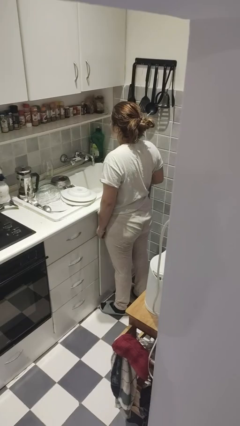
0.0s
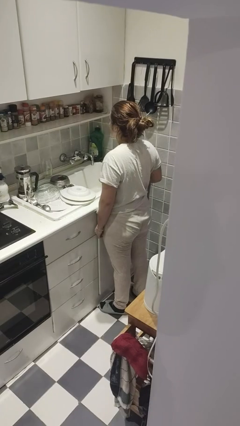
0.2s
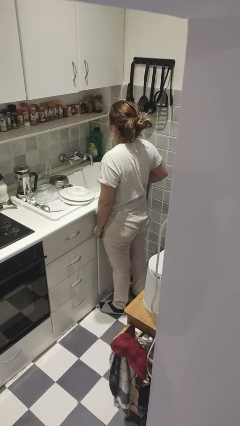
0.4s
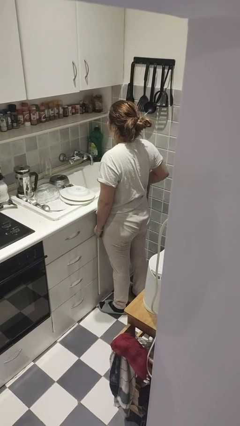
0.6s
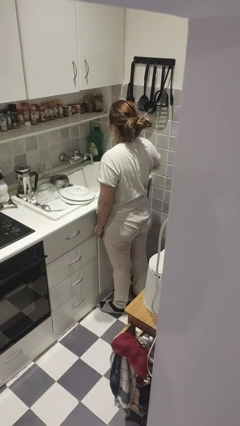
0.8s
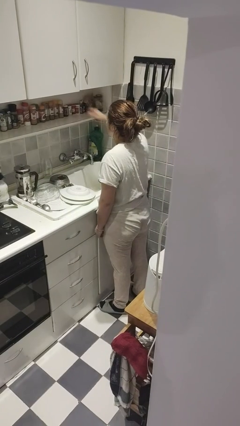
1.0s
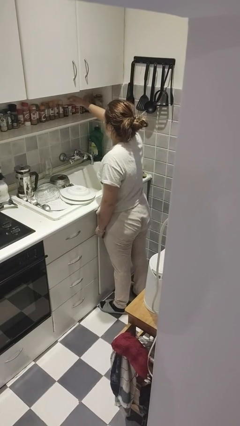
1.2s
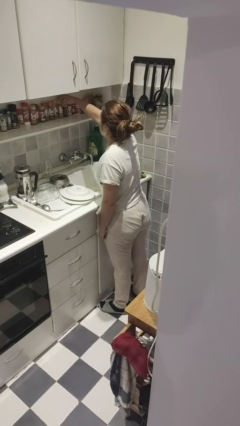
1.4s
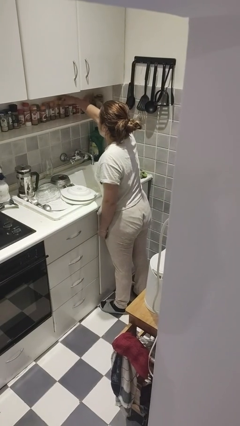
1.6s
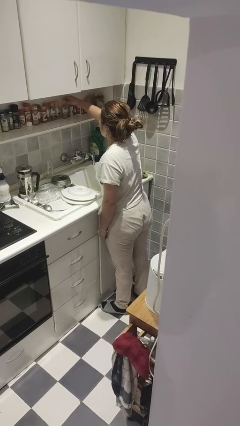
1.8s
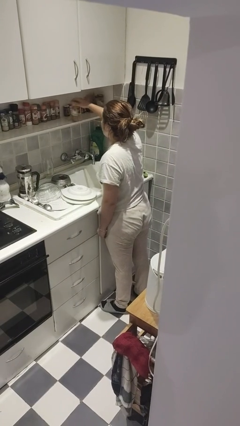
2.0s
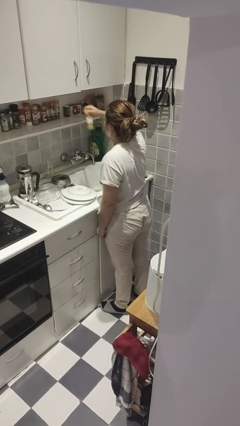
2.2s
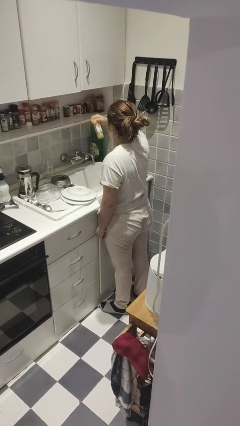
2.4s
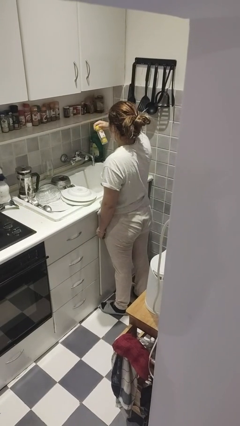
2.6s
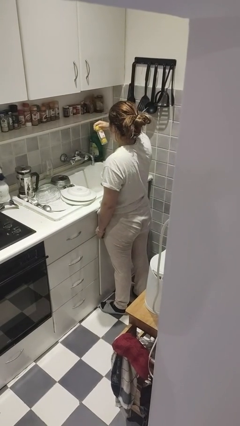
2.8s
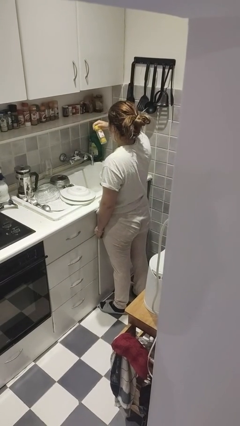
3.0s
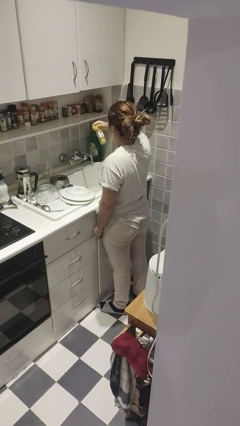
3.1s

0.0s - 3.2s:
person picks up object from countertop

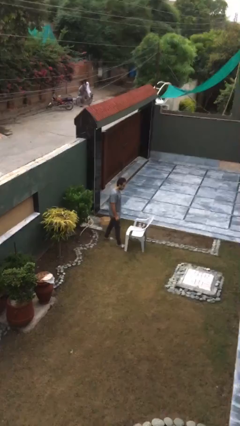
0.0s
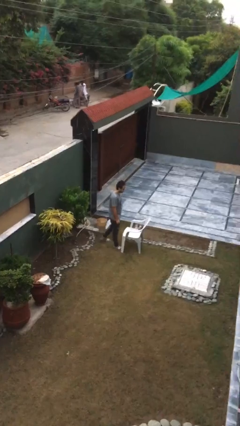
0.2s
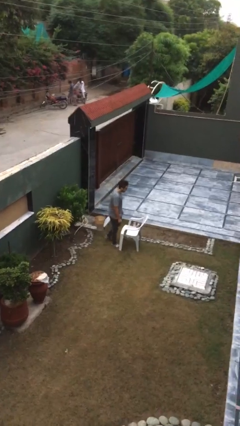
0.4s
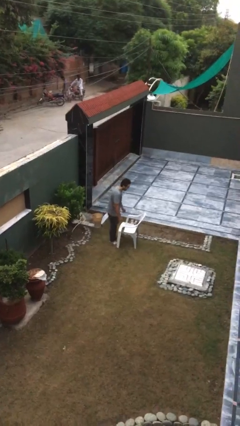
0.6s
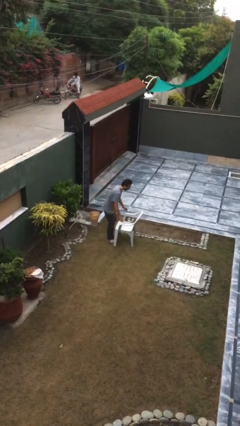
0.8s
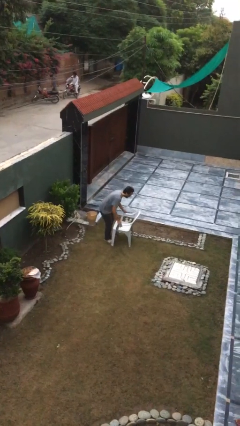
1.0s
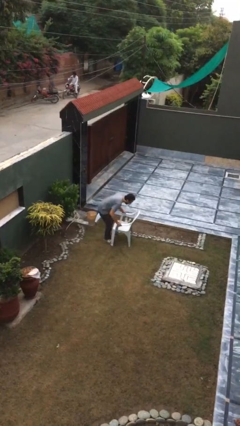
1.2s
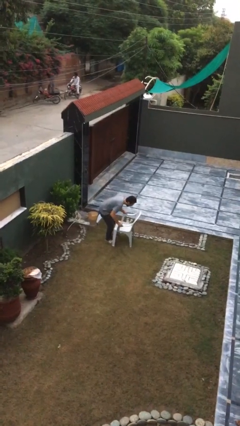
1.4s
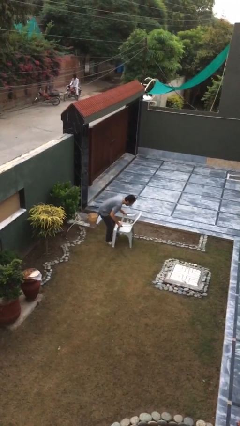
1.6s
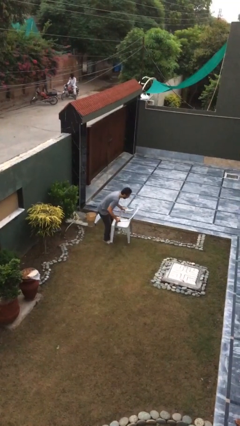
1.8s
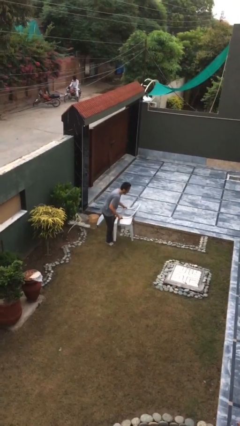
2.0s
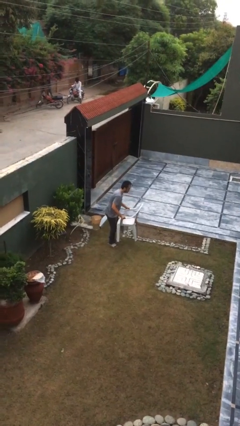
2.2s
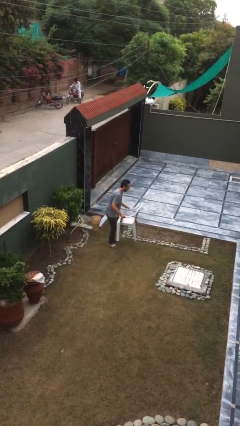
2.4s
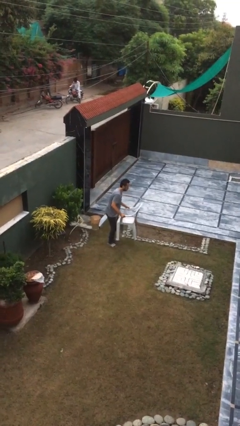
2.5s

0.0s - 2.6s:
person picks up object from floor

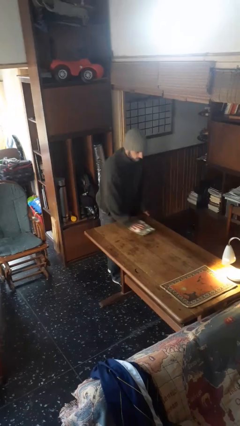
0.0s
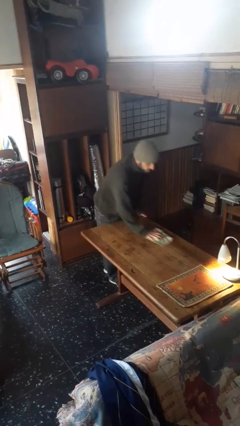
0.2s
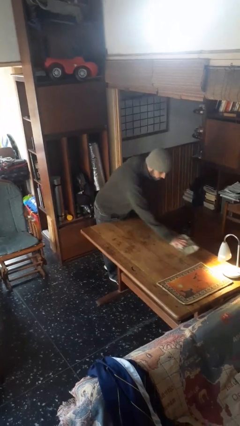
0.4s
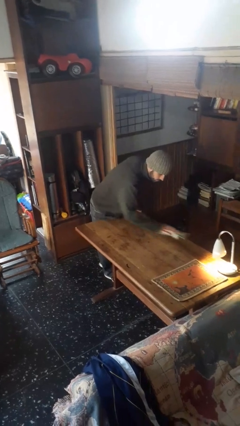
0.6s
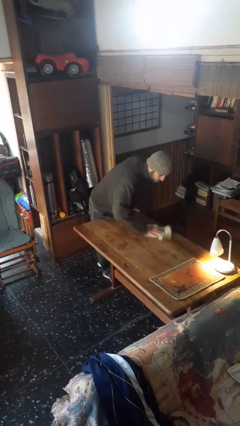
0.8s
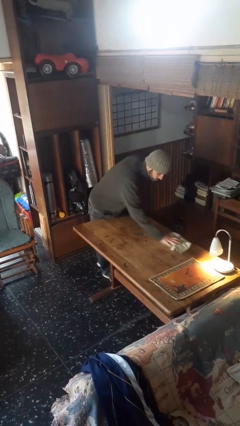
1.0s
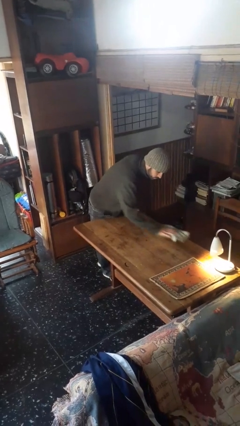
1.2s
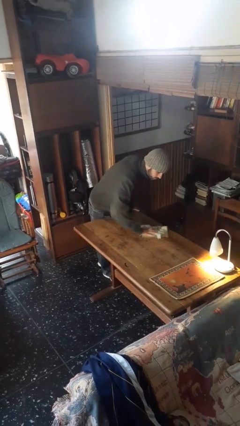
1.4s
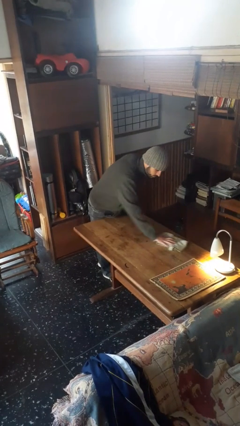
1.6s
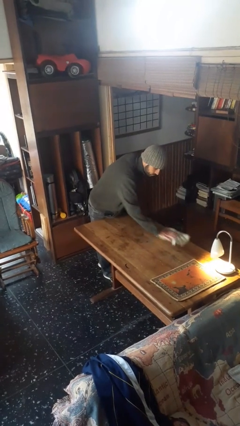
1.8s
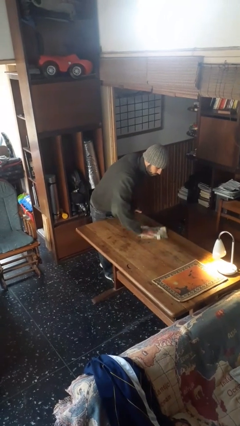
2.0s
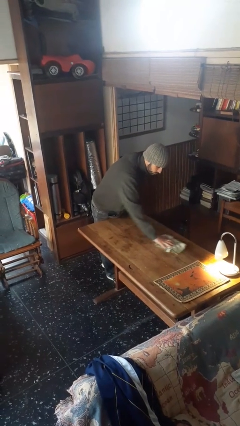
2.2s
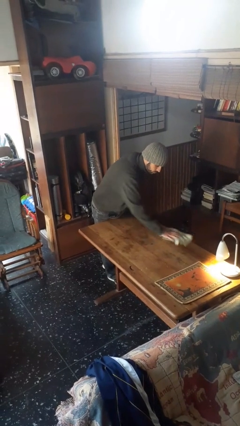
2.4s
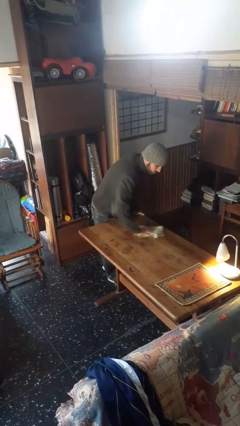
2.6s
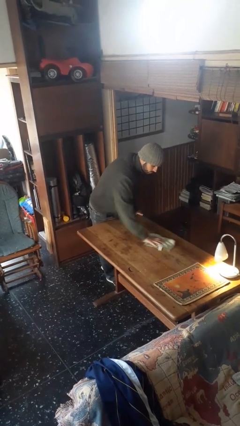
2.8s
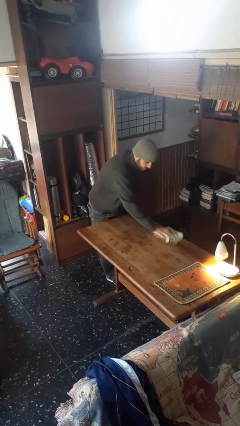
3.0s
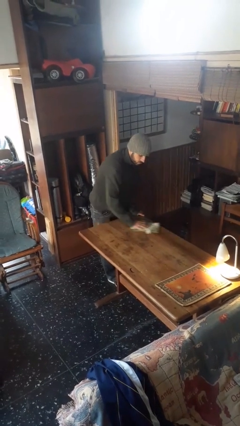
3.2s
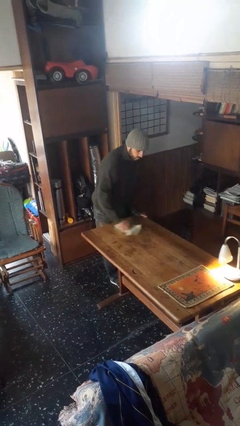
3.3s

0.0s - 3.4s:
person cleans table with rag

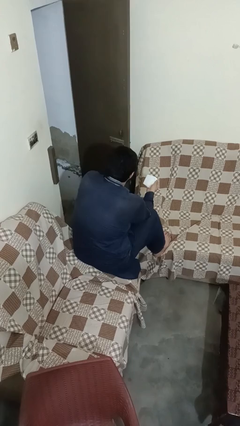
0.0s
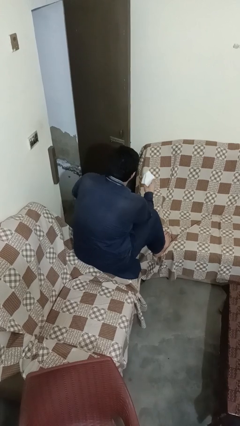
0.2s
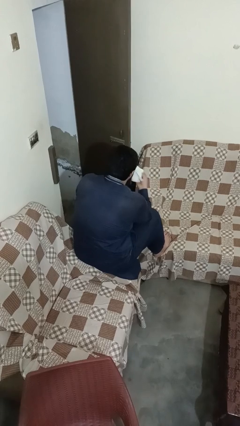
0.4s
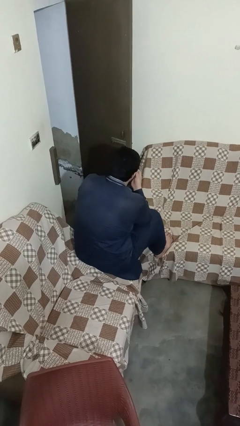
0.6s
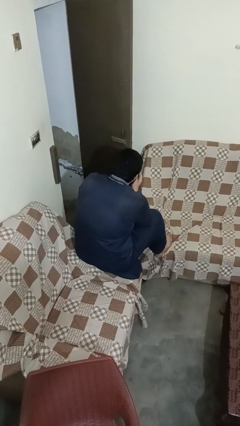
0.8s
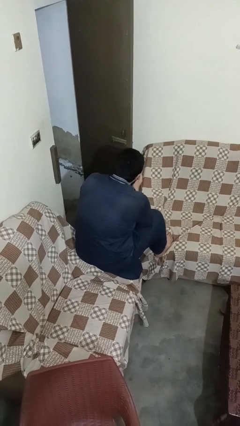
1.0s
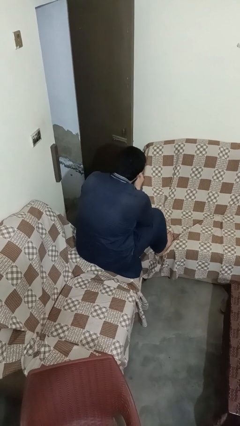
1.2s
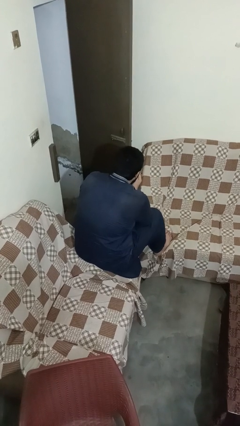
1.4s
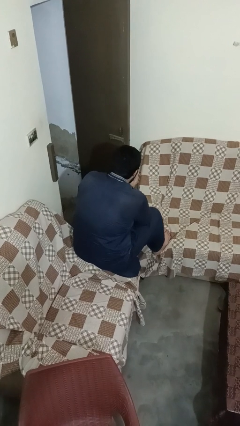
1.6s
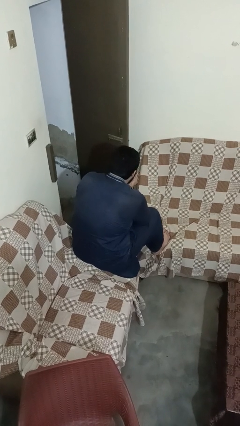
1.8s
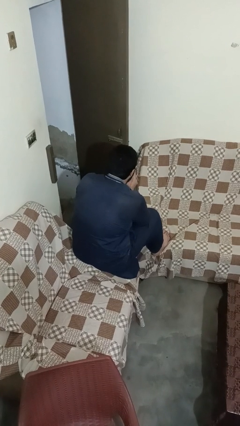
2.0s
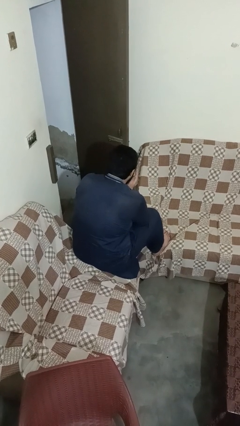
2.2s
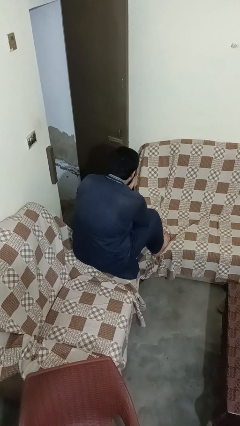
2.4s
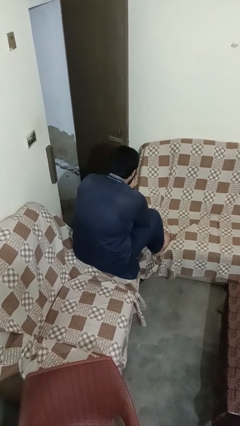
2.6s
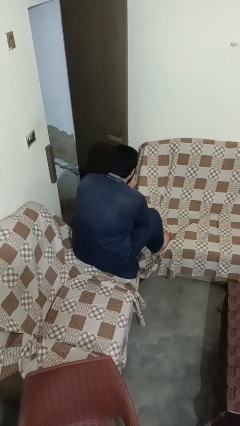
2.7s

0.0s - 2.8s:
person blows nose

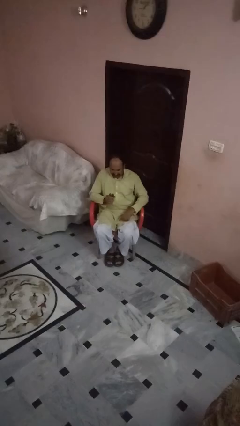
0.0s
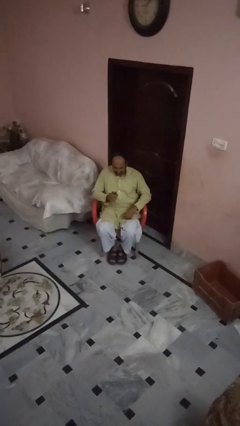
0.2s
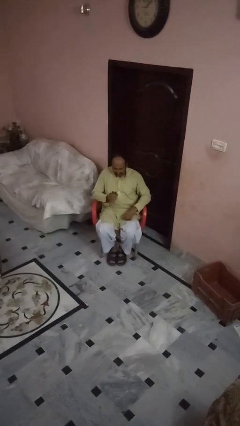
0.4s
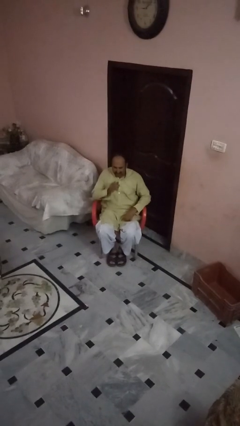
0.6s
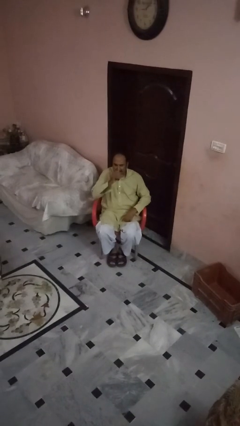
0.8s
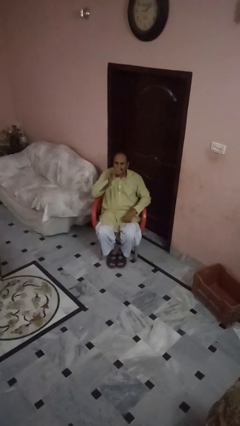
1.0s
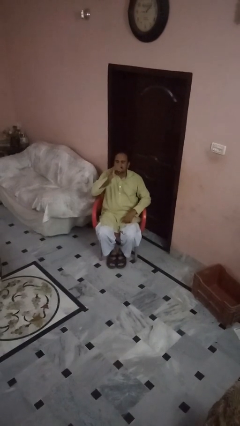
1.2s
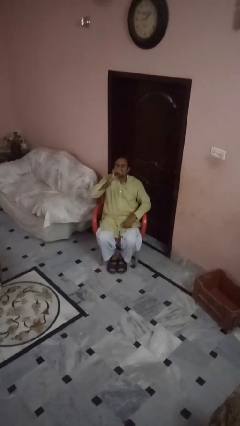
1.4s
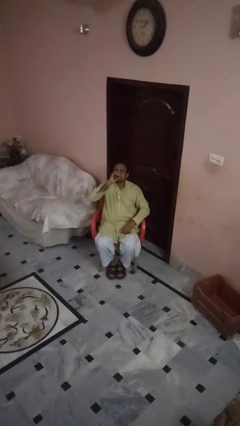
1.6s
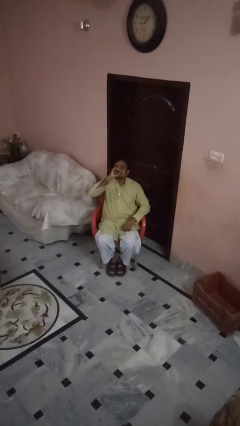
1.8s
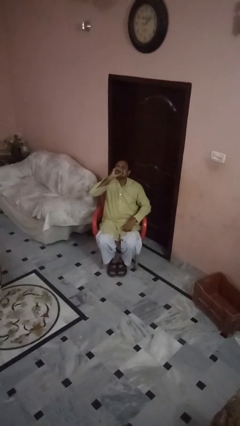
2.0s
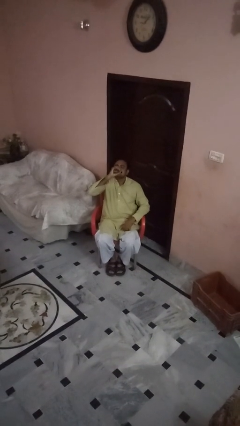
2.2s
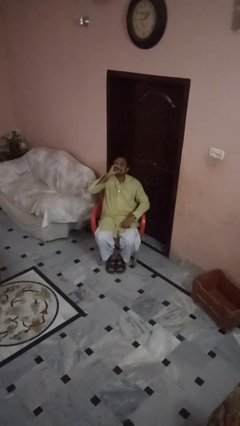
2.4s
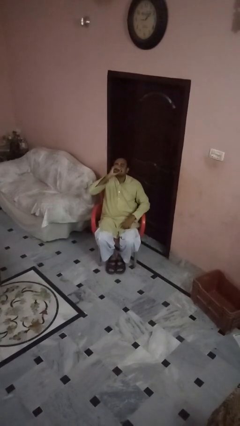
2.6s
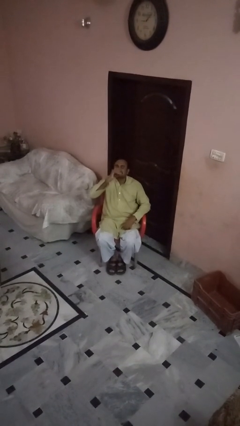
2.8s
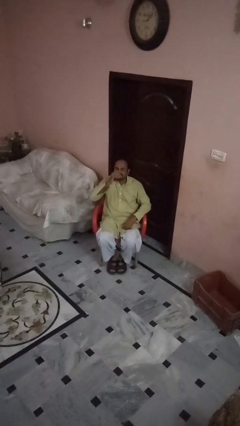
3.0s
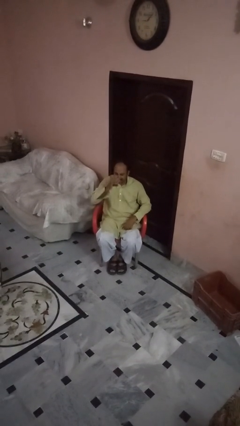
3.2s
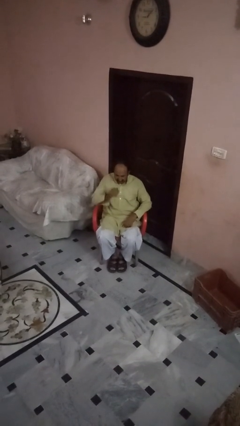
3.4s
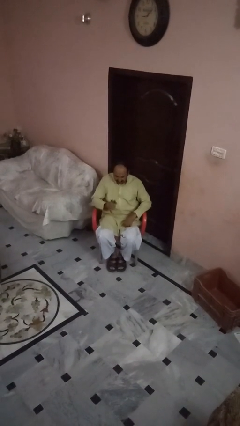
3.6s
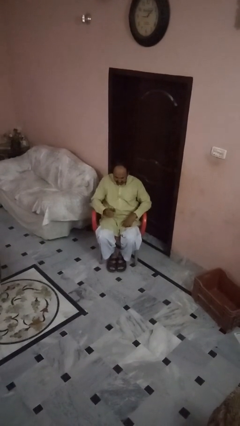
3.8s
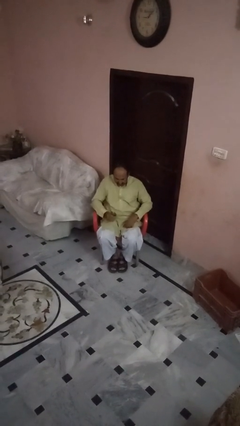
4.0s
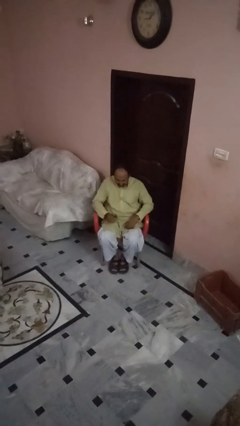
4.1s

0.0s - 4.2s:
person drinks from beverage can

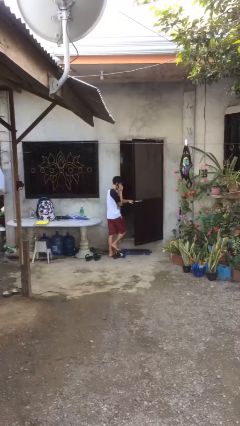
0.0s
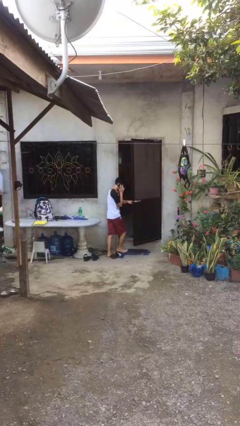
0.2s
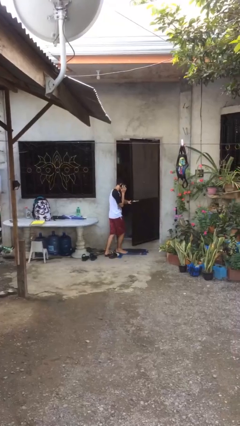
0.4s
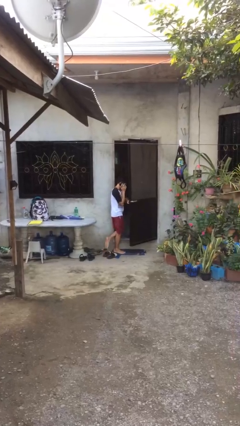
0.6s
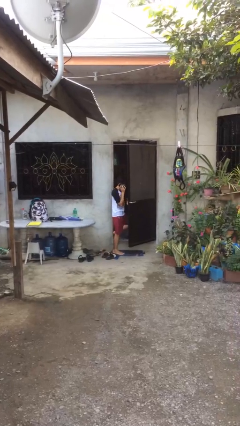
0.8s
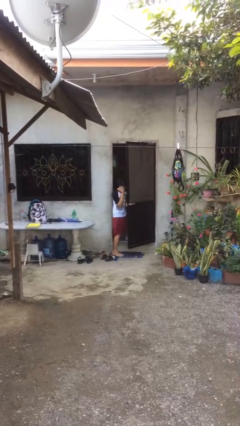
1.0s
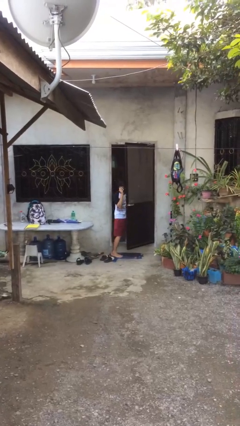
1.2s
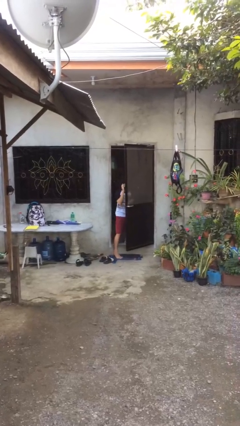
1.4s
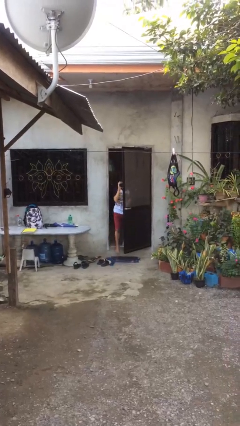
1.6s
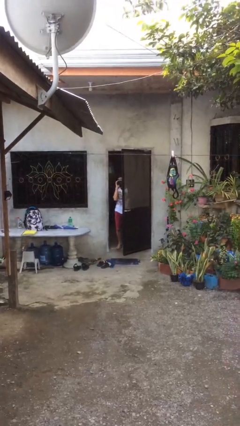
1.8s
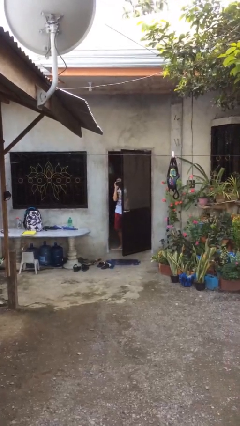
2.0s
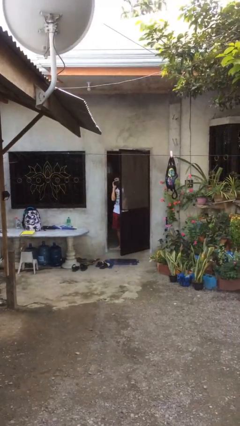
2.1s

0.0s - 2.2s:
person exits scene through structure
